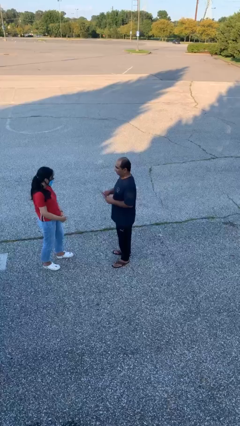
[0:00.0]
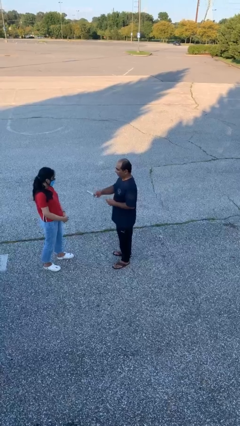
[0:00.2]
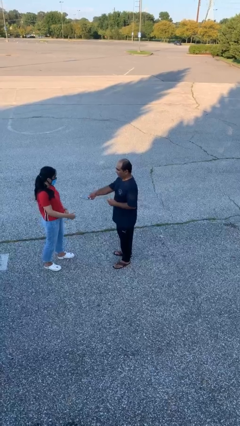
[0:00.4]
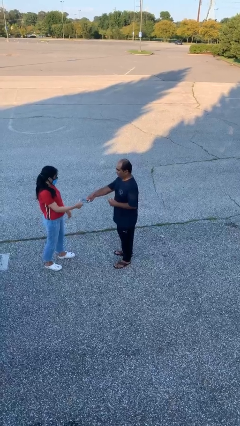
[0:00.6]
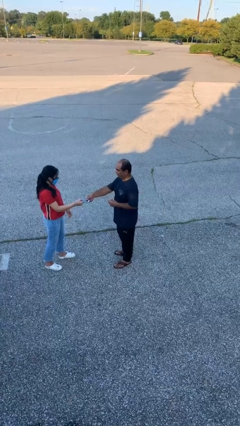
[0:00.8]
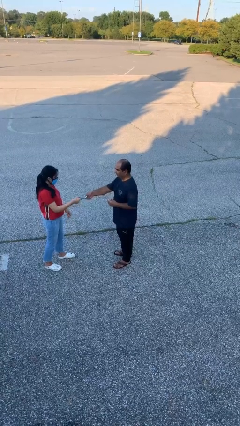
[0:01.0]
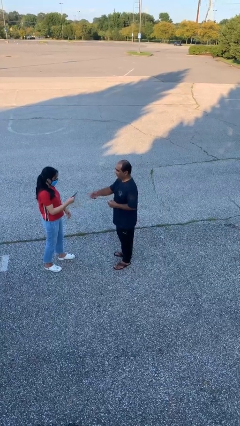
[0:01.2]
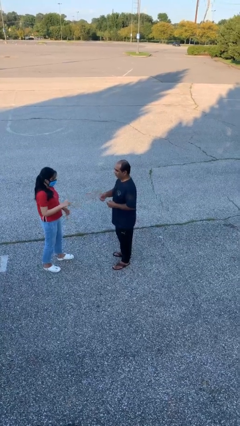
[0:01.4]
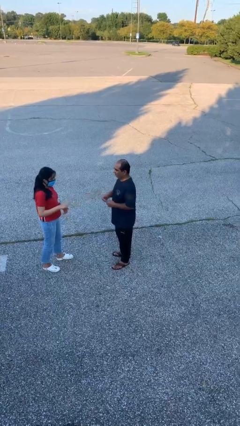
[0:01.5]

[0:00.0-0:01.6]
person transfers object to person

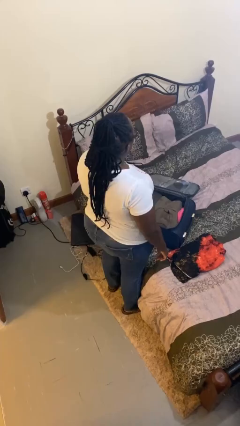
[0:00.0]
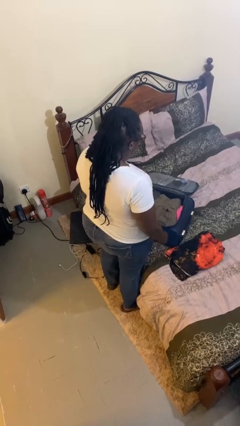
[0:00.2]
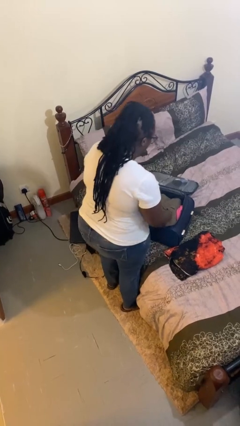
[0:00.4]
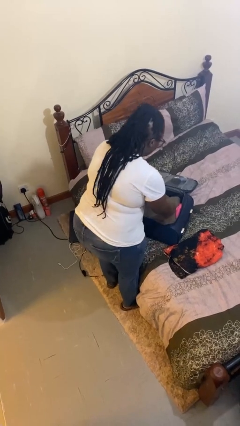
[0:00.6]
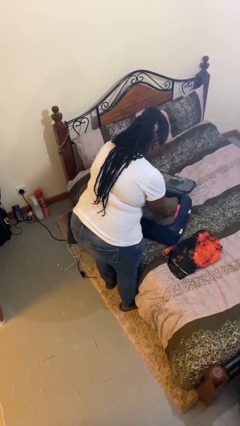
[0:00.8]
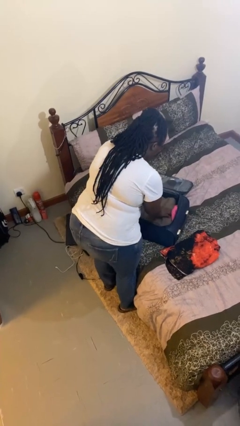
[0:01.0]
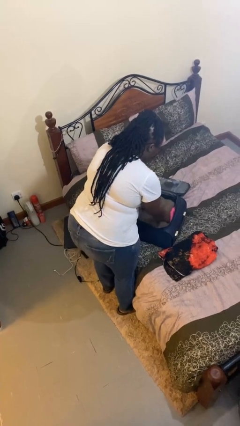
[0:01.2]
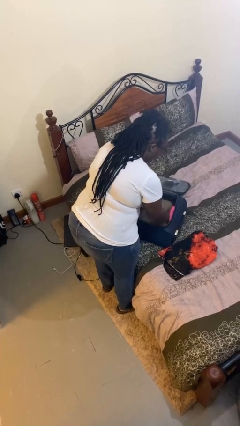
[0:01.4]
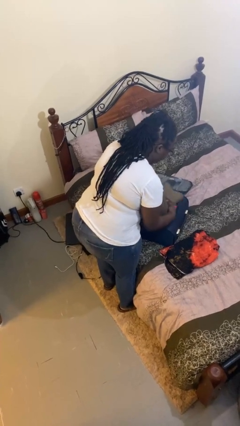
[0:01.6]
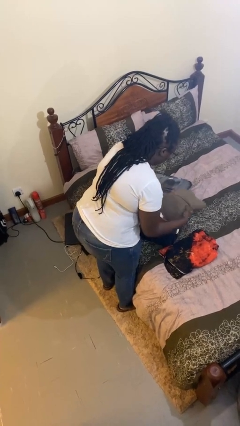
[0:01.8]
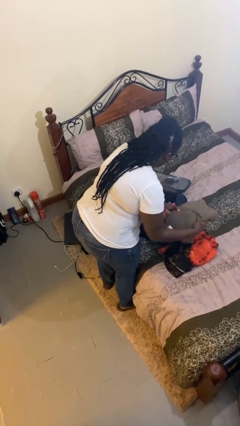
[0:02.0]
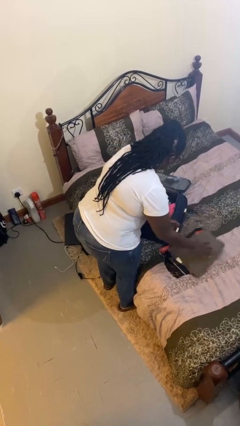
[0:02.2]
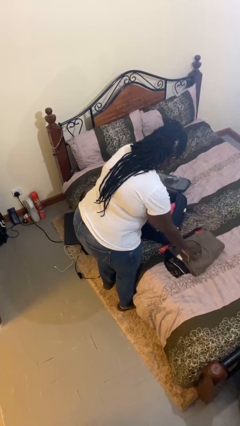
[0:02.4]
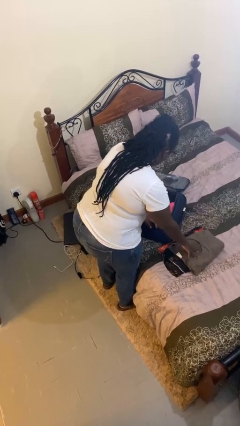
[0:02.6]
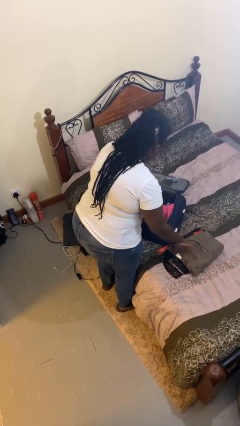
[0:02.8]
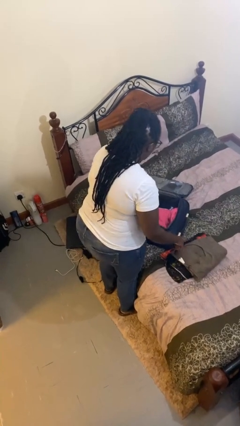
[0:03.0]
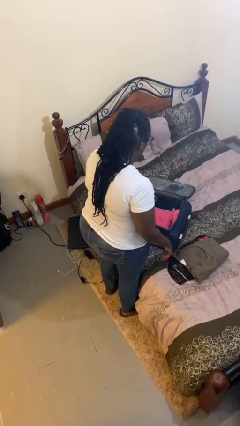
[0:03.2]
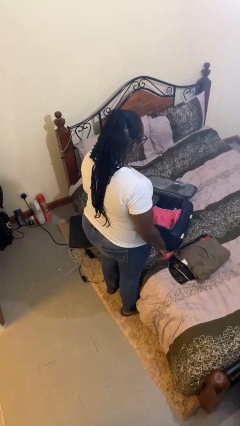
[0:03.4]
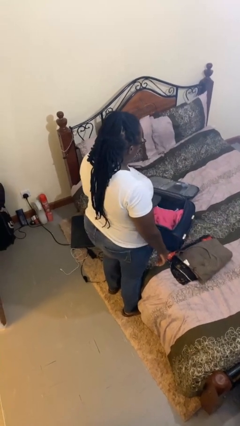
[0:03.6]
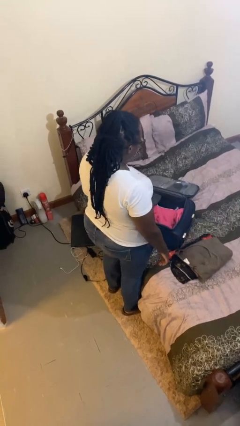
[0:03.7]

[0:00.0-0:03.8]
person unloads clothes from suitcase

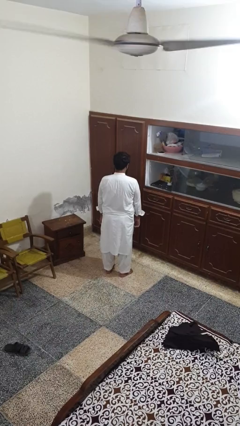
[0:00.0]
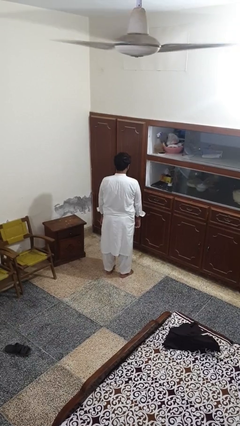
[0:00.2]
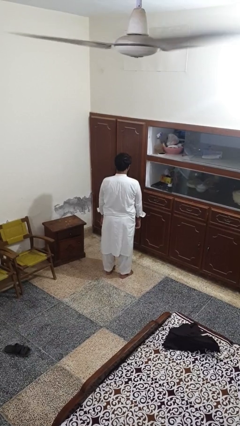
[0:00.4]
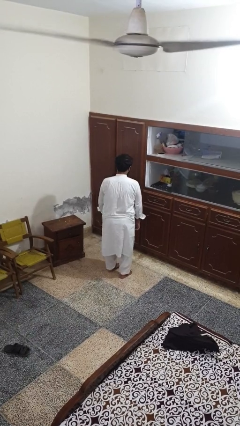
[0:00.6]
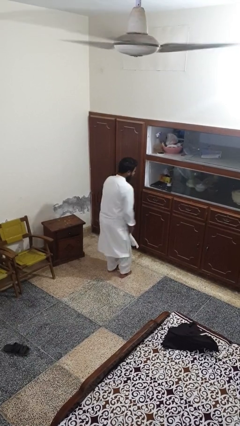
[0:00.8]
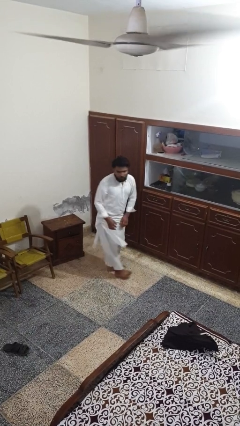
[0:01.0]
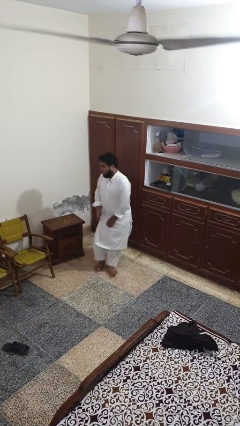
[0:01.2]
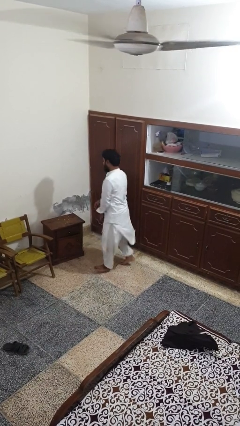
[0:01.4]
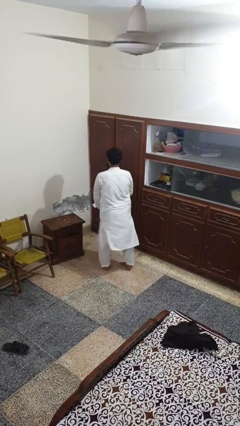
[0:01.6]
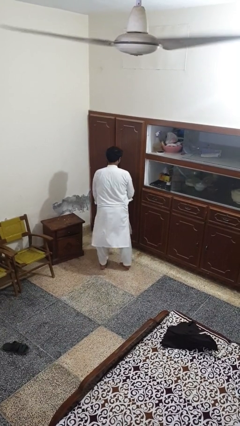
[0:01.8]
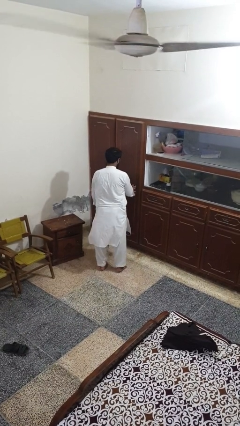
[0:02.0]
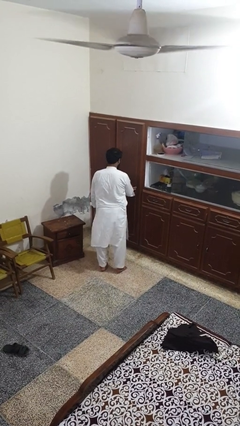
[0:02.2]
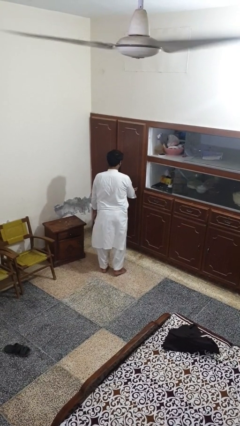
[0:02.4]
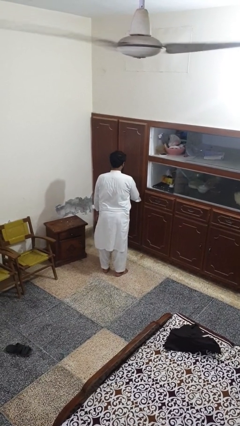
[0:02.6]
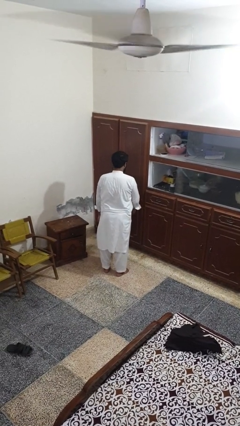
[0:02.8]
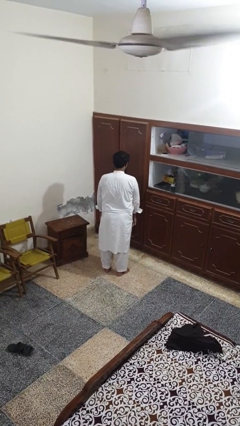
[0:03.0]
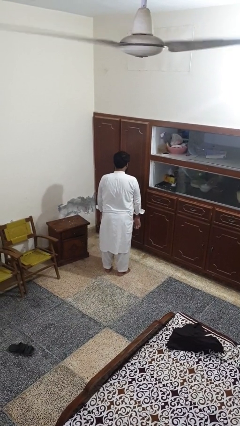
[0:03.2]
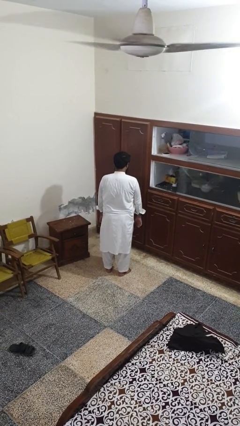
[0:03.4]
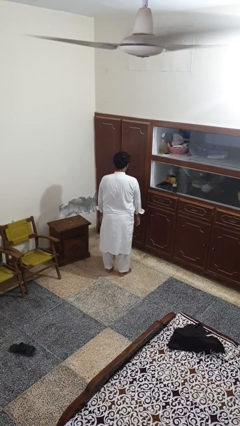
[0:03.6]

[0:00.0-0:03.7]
person twirls

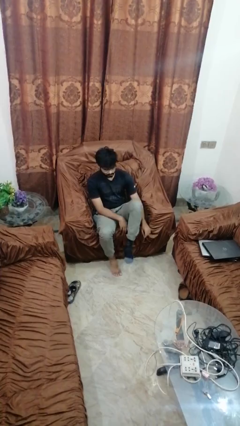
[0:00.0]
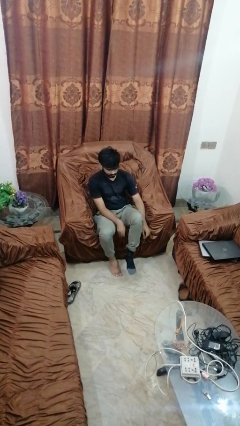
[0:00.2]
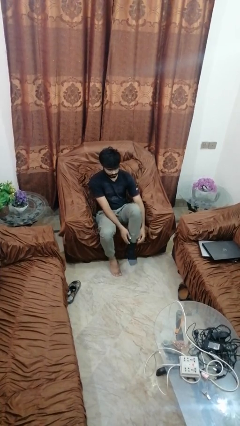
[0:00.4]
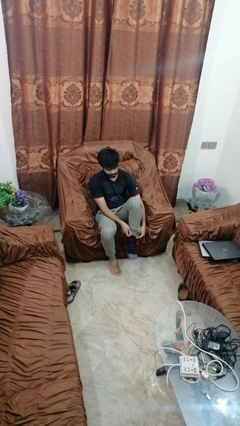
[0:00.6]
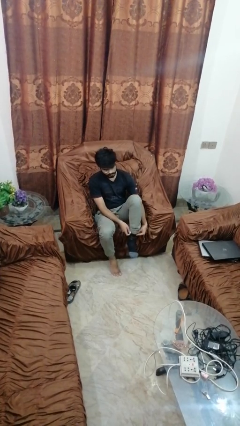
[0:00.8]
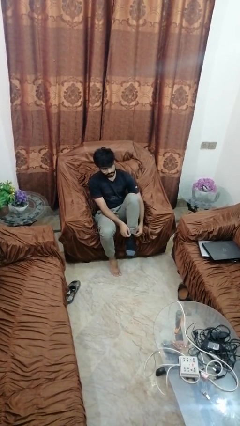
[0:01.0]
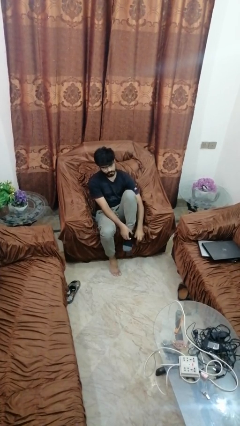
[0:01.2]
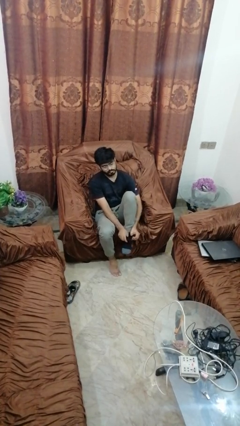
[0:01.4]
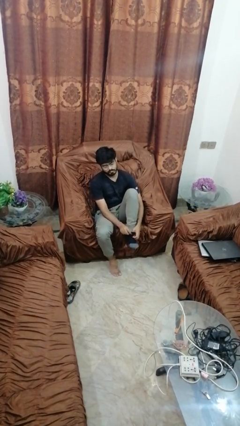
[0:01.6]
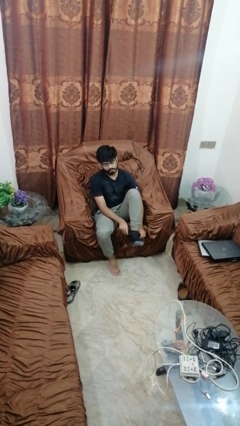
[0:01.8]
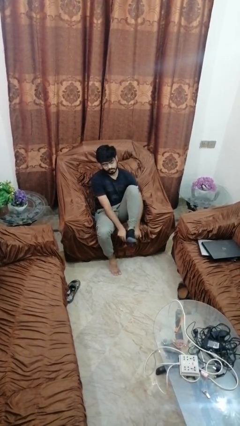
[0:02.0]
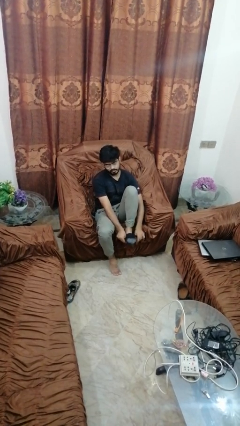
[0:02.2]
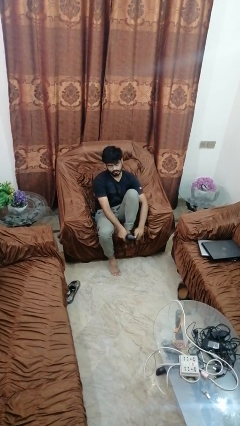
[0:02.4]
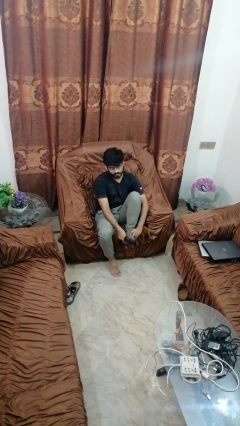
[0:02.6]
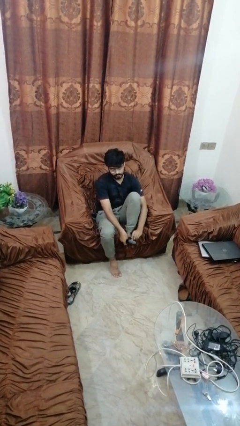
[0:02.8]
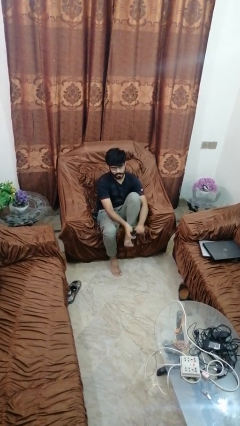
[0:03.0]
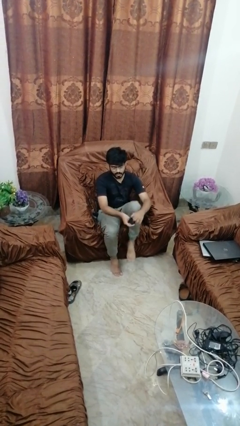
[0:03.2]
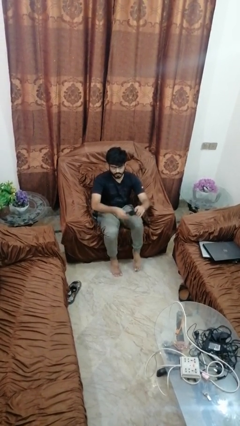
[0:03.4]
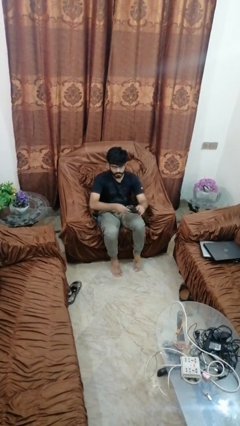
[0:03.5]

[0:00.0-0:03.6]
person takes off socks

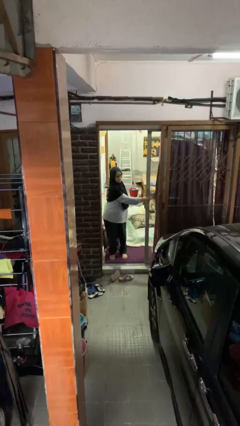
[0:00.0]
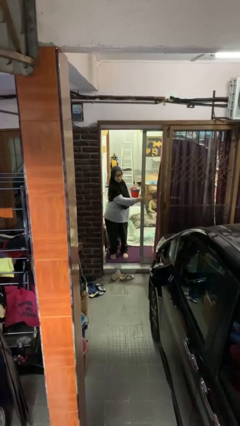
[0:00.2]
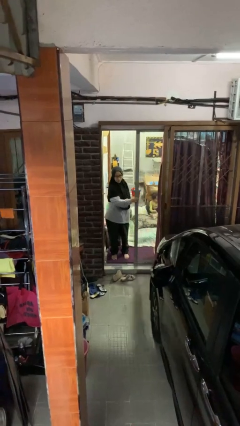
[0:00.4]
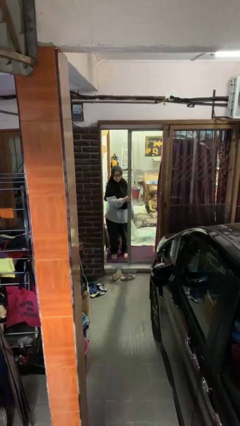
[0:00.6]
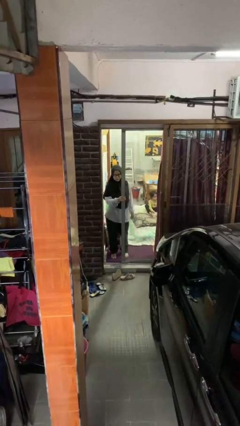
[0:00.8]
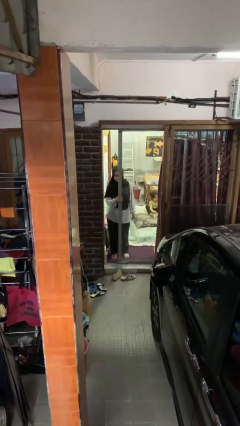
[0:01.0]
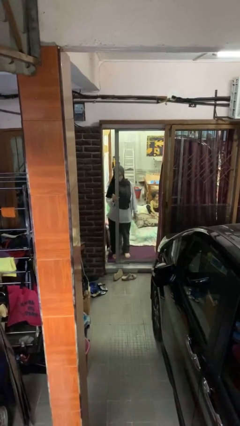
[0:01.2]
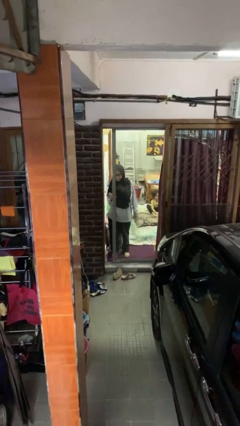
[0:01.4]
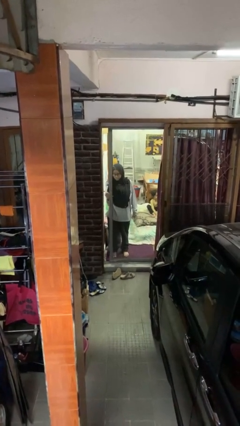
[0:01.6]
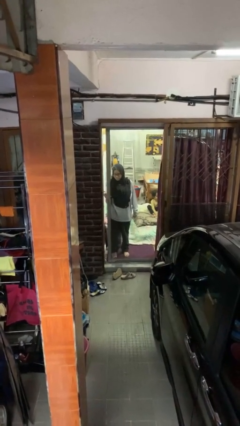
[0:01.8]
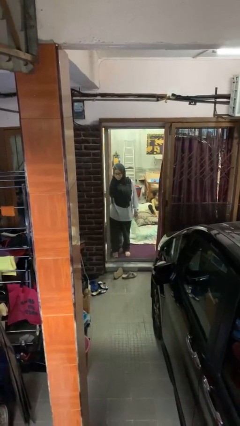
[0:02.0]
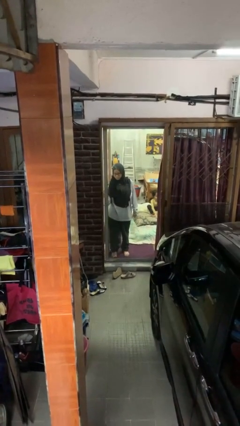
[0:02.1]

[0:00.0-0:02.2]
person closes sliding door

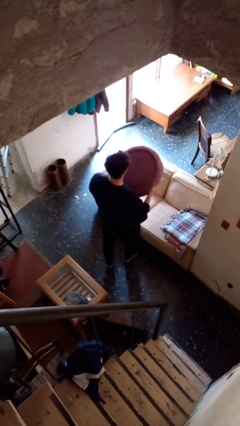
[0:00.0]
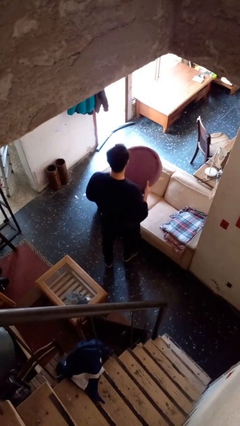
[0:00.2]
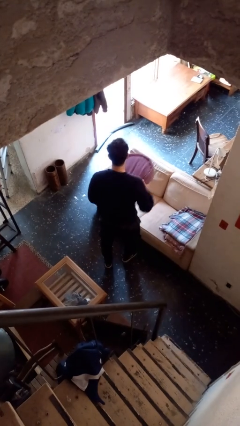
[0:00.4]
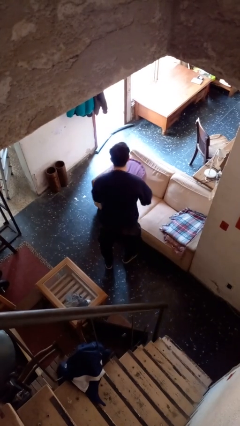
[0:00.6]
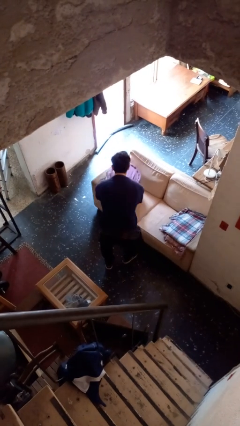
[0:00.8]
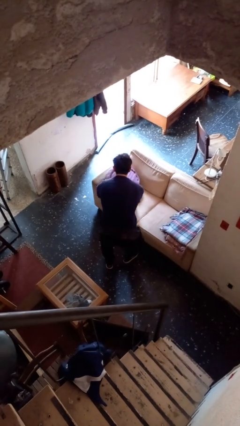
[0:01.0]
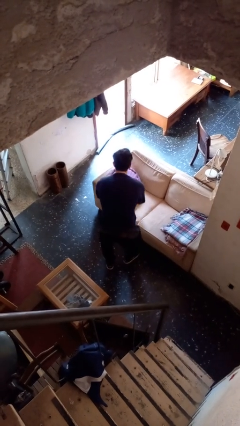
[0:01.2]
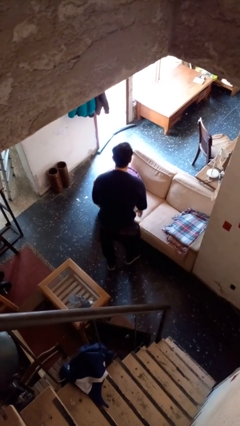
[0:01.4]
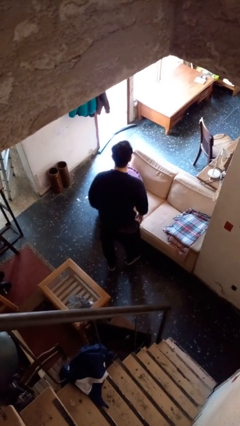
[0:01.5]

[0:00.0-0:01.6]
person puts down object on couch

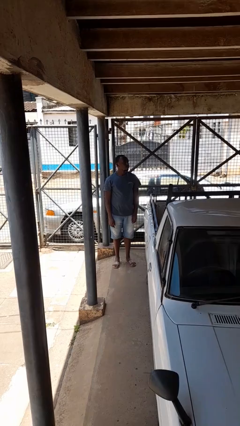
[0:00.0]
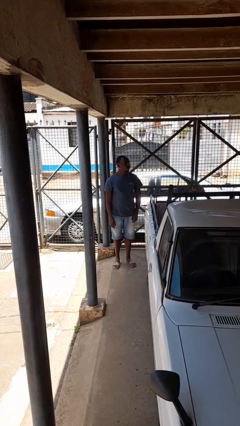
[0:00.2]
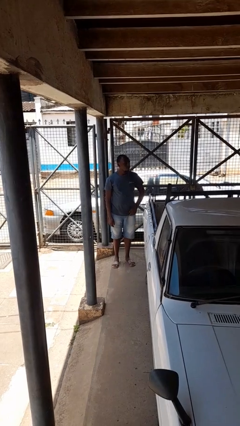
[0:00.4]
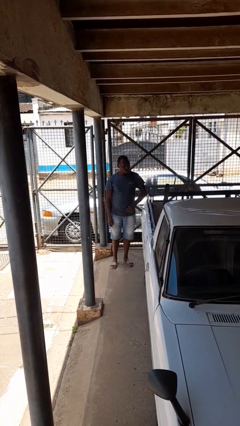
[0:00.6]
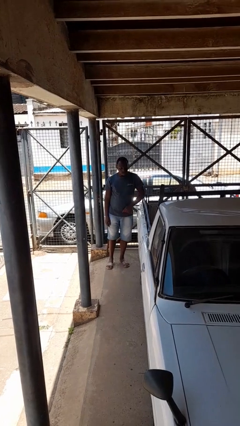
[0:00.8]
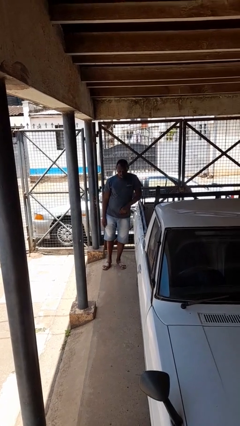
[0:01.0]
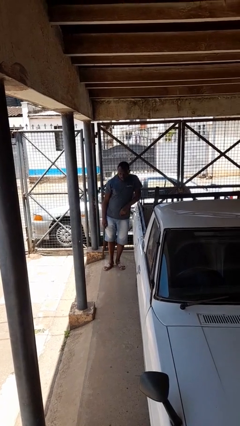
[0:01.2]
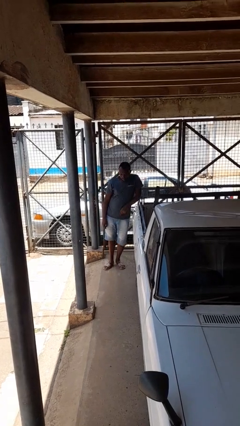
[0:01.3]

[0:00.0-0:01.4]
person leans against car
